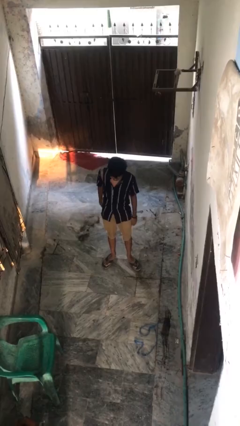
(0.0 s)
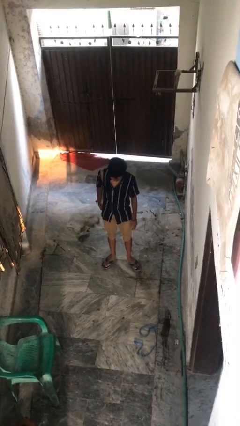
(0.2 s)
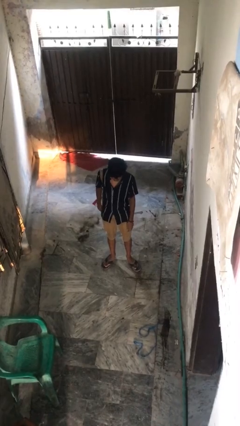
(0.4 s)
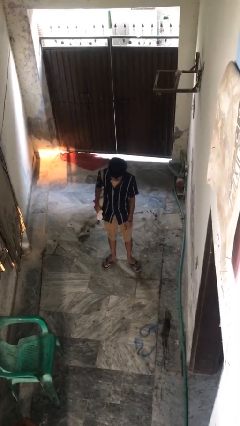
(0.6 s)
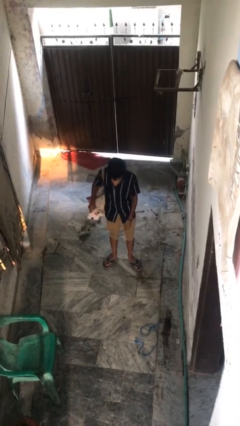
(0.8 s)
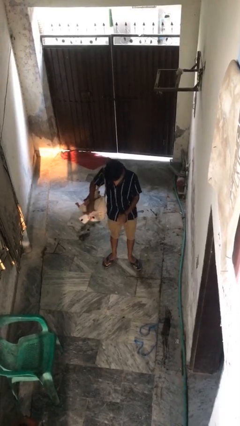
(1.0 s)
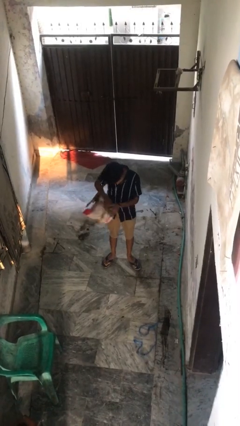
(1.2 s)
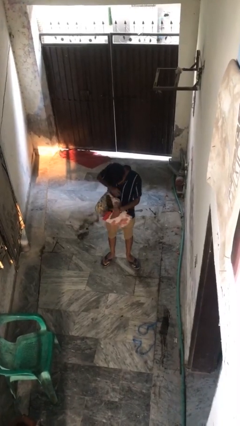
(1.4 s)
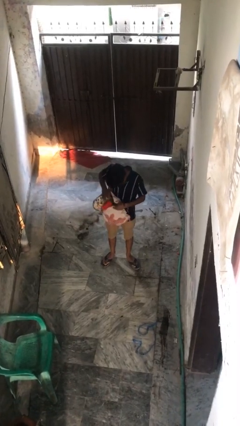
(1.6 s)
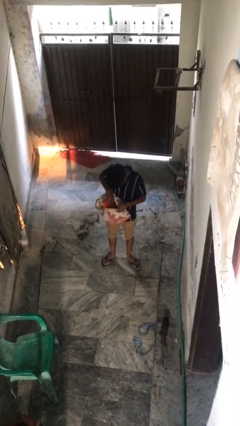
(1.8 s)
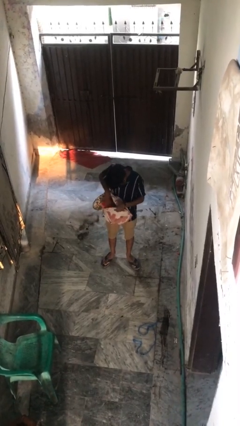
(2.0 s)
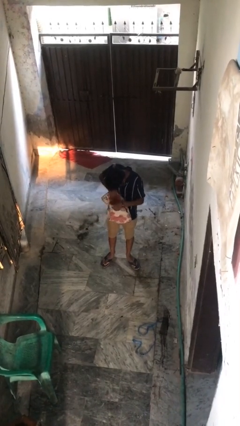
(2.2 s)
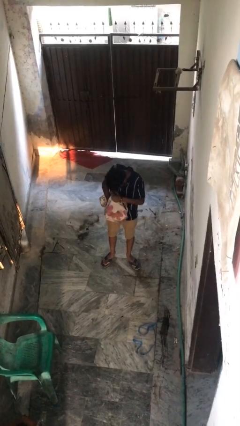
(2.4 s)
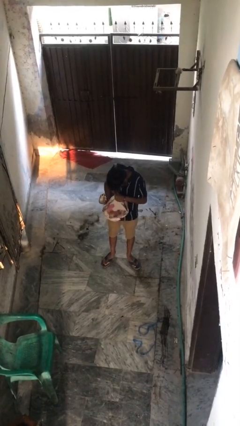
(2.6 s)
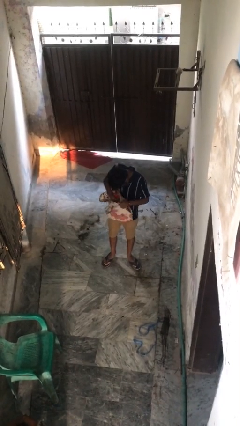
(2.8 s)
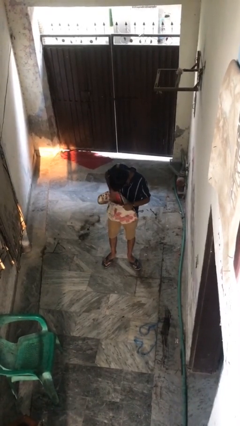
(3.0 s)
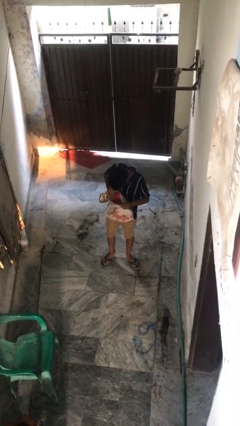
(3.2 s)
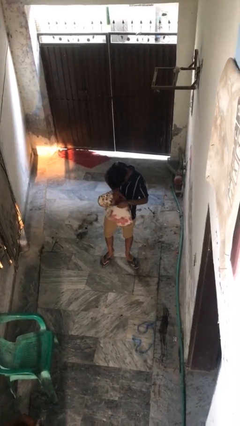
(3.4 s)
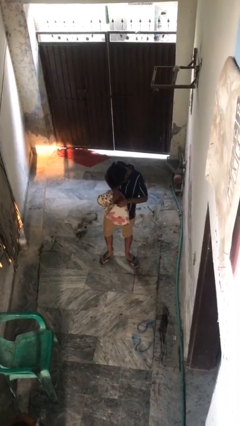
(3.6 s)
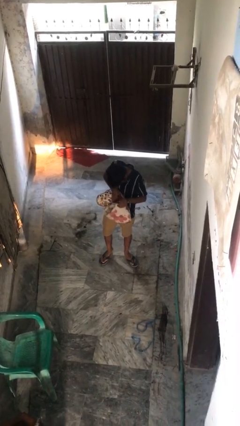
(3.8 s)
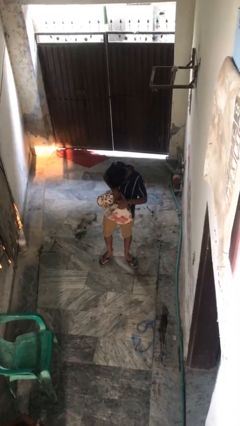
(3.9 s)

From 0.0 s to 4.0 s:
person searches in backpack

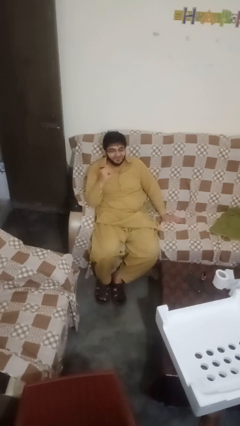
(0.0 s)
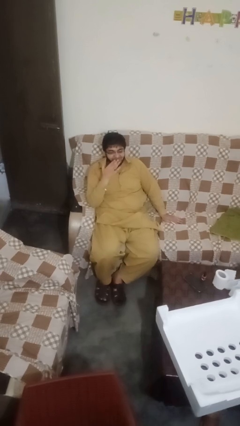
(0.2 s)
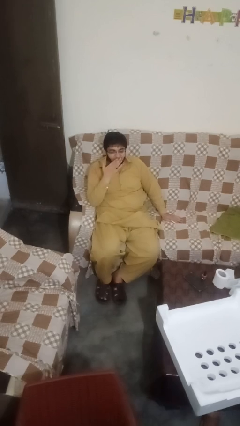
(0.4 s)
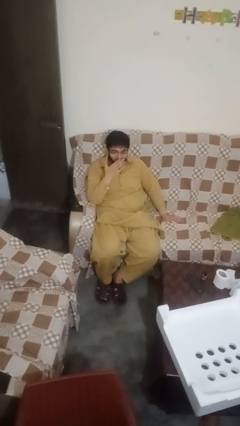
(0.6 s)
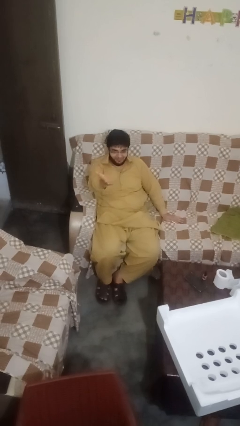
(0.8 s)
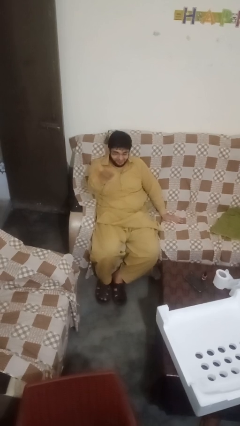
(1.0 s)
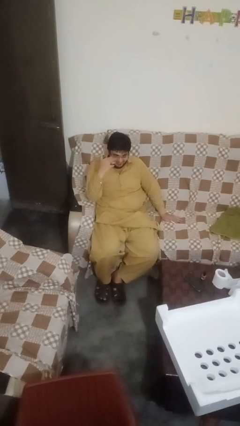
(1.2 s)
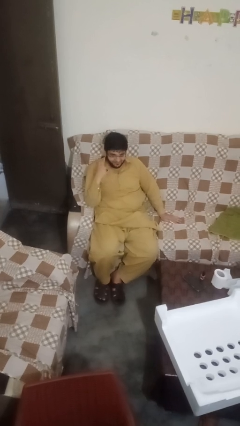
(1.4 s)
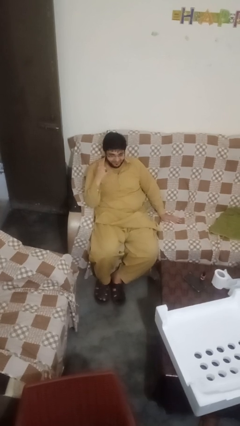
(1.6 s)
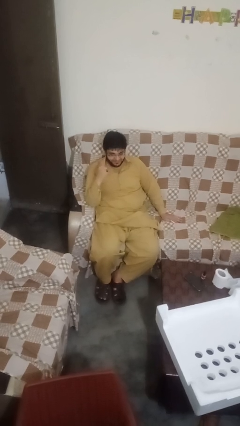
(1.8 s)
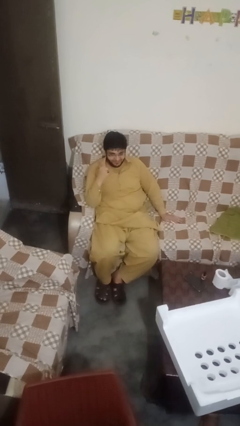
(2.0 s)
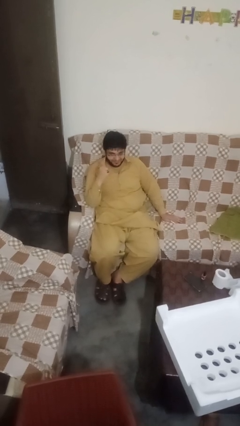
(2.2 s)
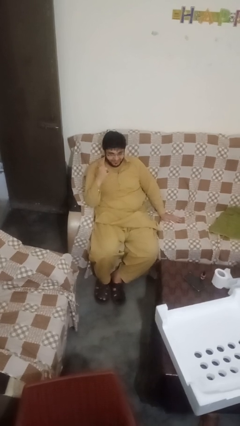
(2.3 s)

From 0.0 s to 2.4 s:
person gestures blow kiss

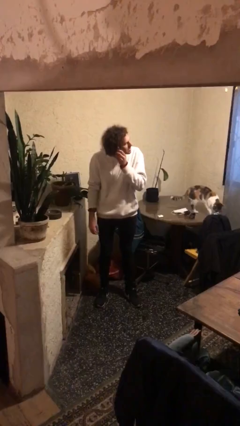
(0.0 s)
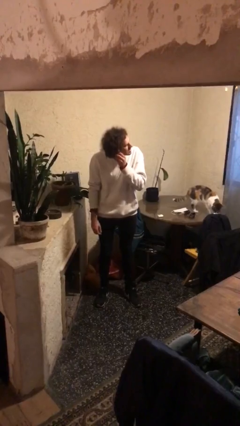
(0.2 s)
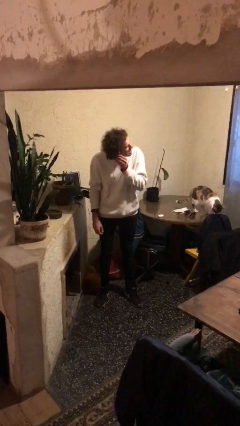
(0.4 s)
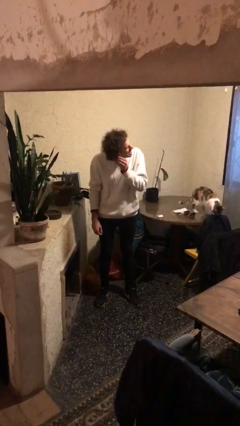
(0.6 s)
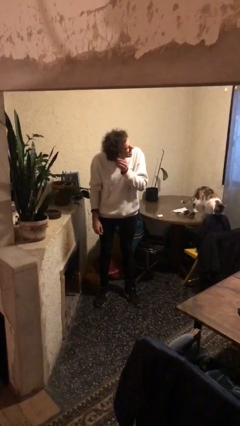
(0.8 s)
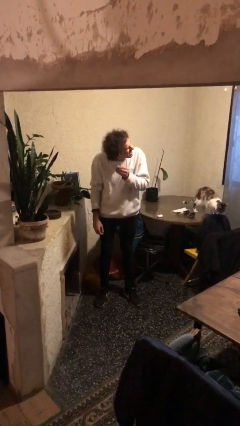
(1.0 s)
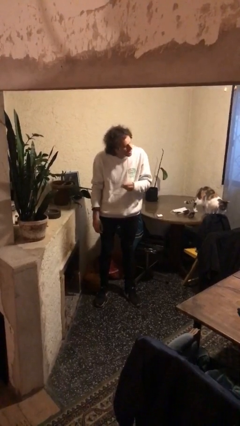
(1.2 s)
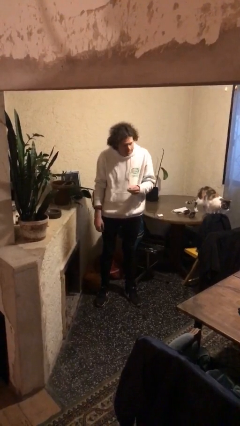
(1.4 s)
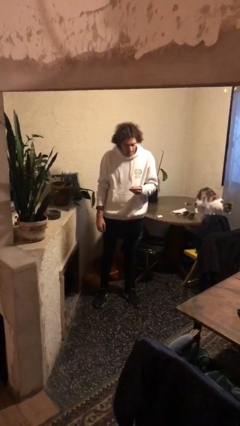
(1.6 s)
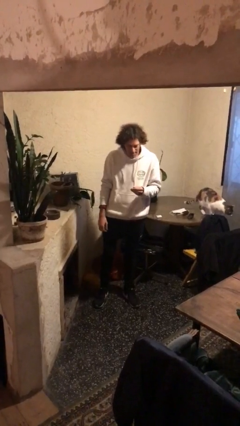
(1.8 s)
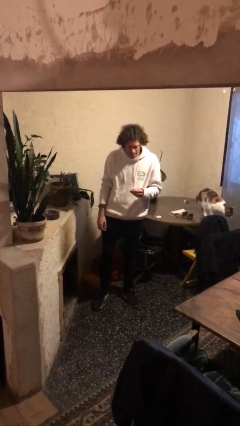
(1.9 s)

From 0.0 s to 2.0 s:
person takes off earrings

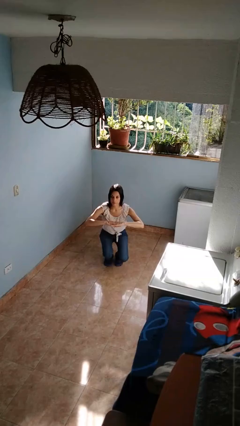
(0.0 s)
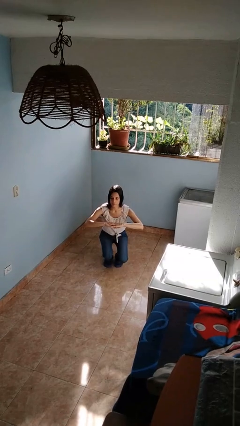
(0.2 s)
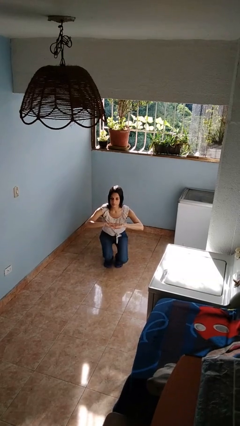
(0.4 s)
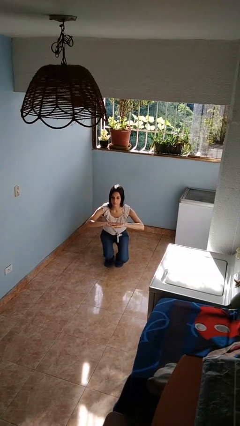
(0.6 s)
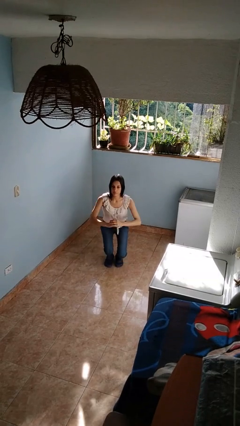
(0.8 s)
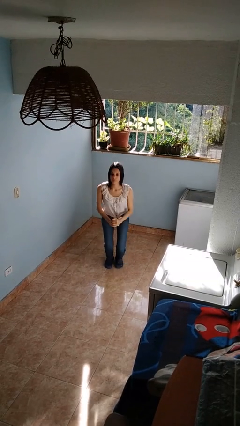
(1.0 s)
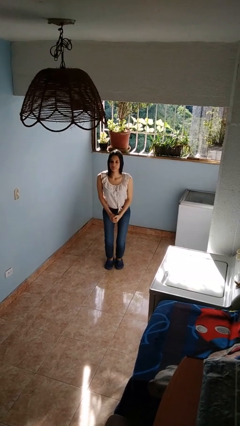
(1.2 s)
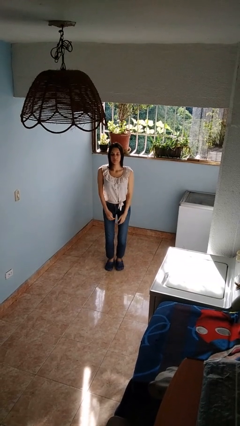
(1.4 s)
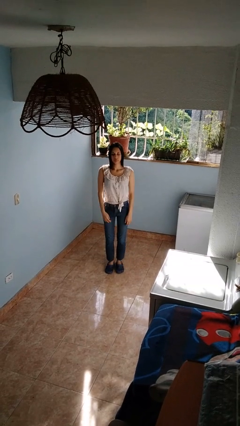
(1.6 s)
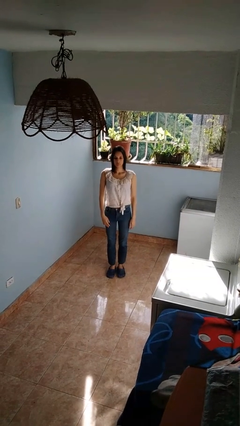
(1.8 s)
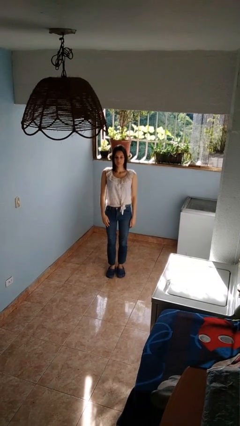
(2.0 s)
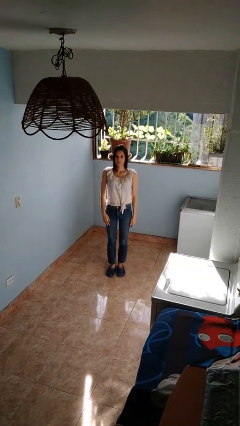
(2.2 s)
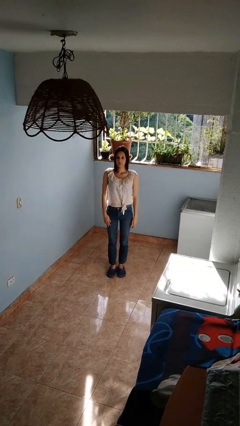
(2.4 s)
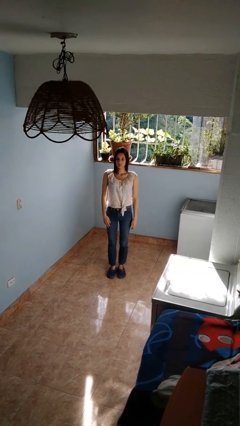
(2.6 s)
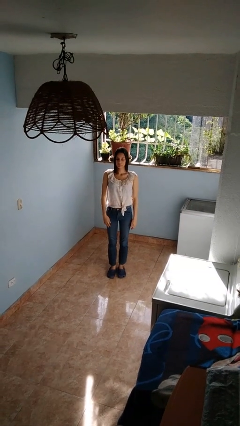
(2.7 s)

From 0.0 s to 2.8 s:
person stands up

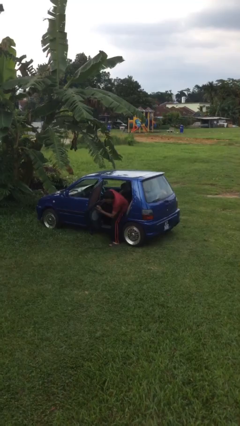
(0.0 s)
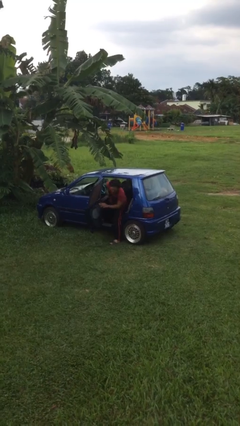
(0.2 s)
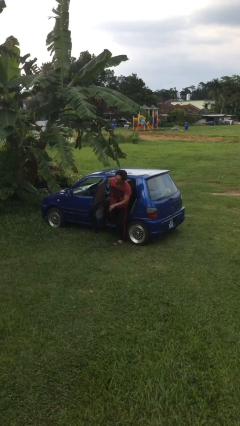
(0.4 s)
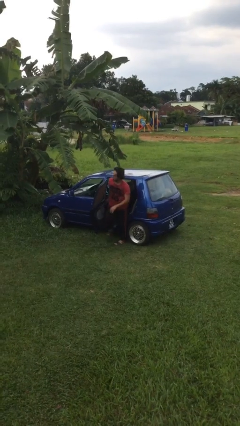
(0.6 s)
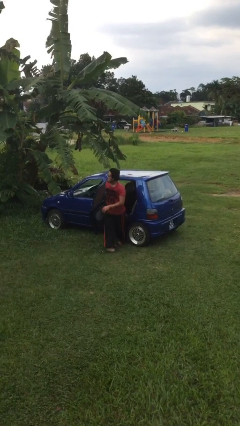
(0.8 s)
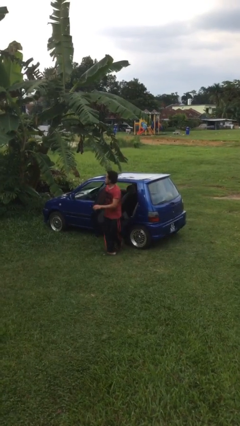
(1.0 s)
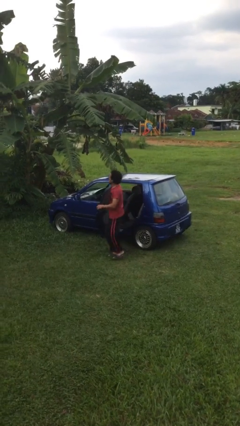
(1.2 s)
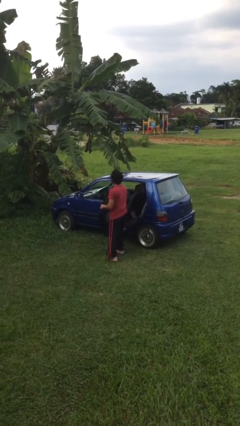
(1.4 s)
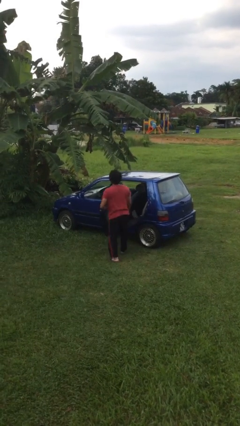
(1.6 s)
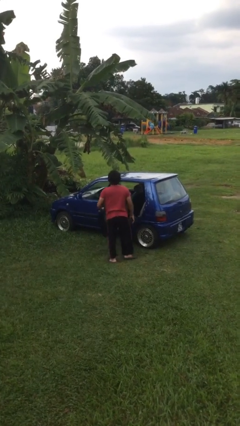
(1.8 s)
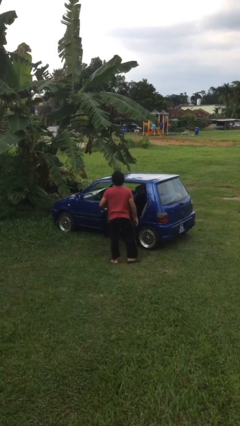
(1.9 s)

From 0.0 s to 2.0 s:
person exits car

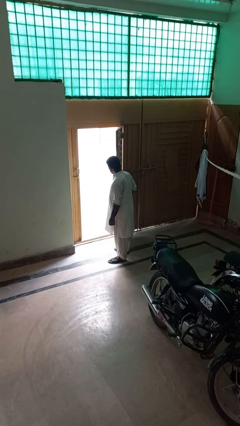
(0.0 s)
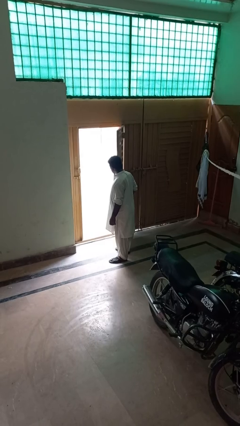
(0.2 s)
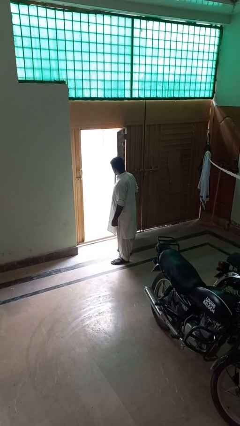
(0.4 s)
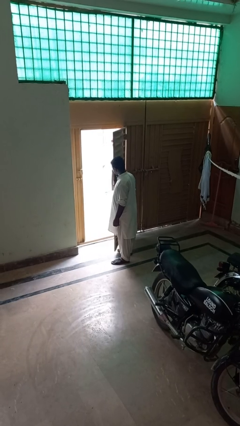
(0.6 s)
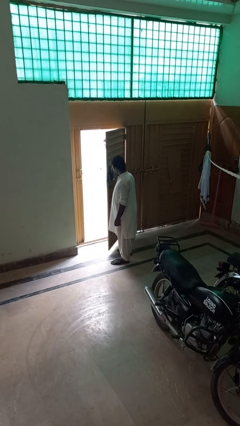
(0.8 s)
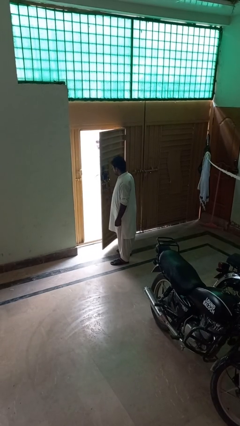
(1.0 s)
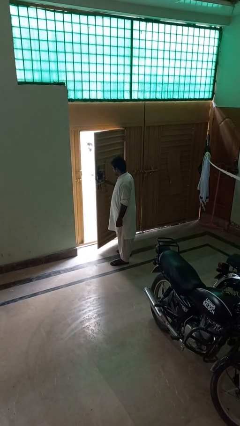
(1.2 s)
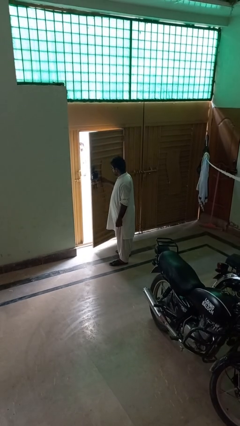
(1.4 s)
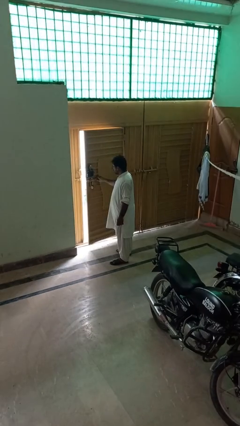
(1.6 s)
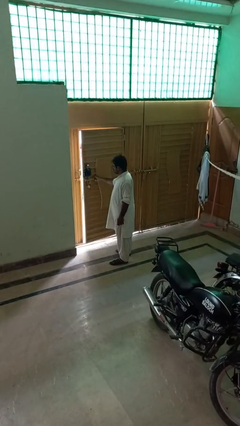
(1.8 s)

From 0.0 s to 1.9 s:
person closes gate

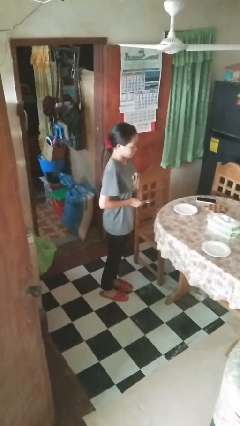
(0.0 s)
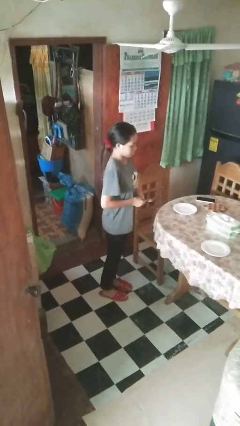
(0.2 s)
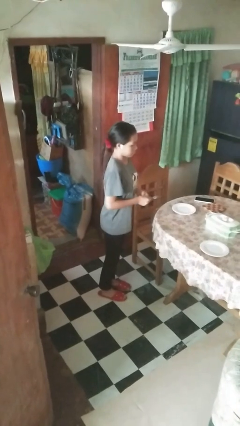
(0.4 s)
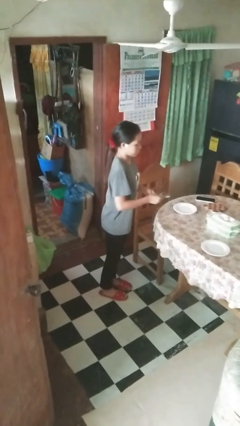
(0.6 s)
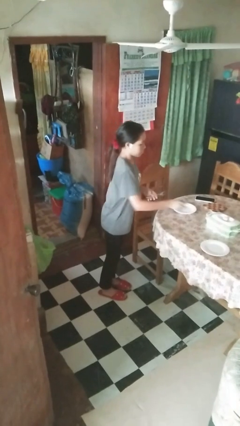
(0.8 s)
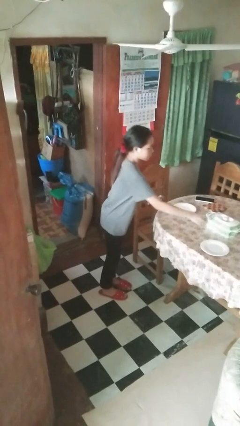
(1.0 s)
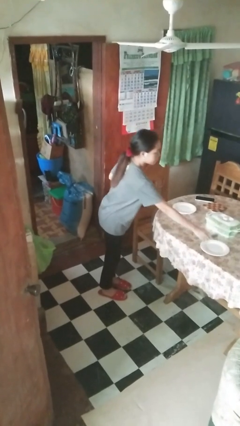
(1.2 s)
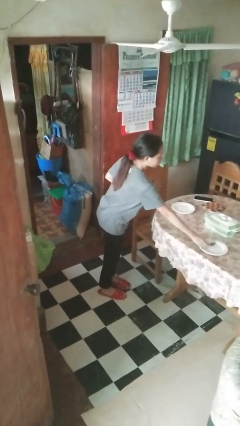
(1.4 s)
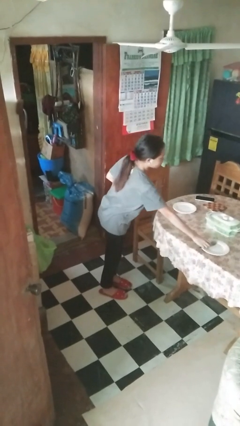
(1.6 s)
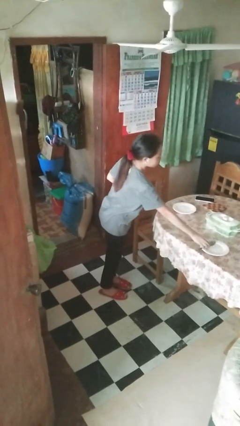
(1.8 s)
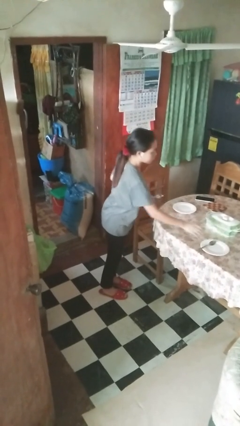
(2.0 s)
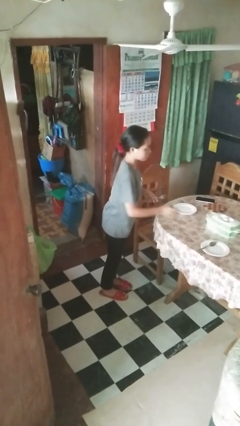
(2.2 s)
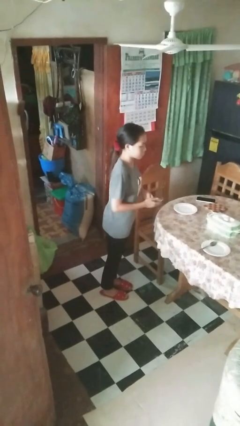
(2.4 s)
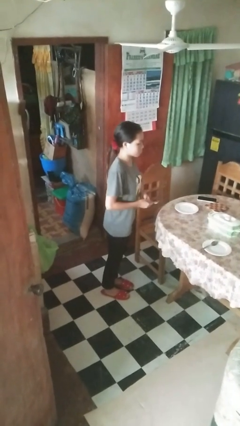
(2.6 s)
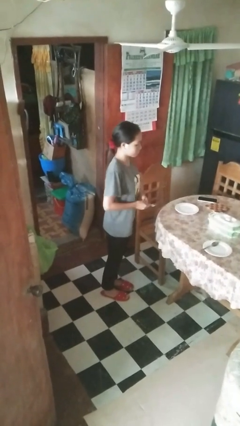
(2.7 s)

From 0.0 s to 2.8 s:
person sets table
